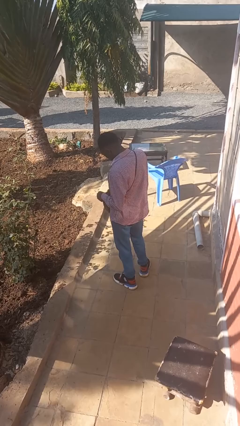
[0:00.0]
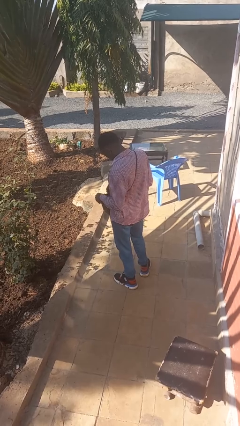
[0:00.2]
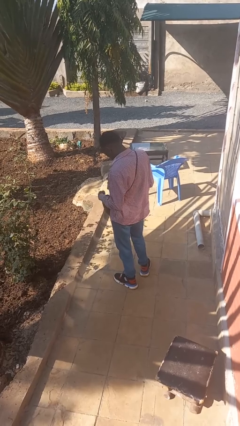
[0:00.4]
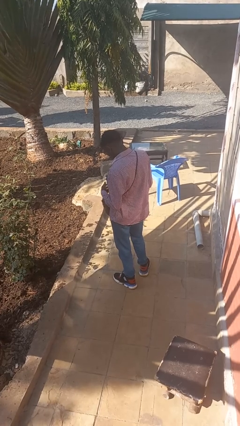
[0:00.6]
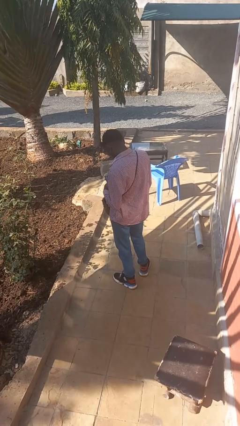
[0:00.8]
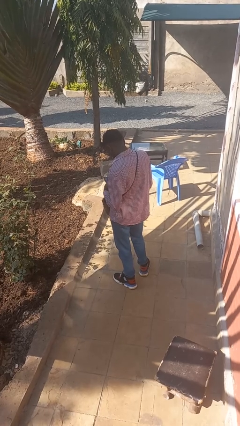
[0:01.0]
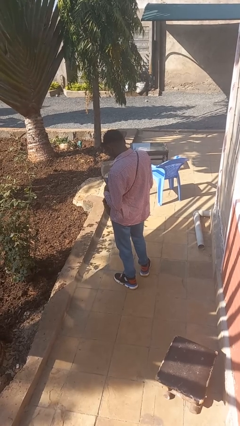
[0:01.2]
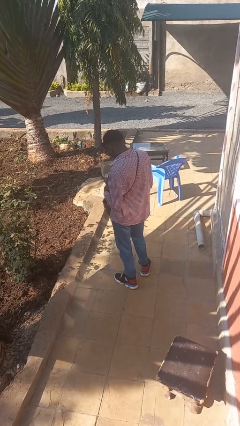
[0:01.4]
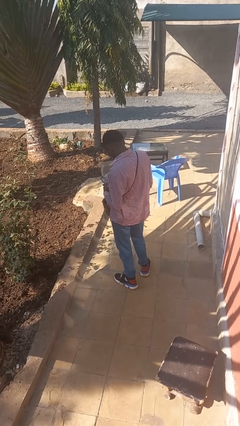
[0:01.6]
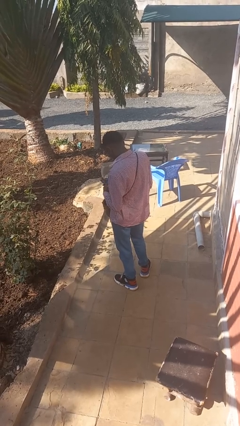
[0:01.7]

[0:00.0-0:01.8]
person takes object from purse

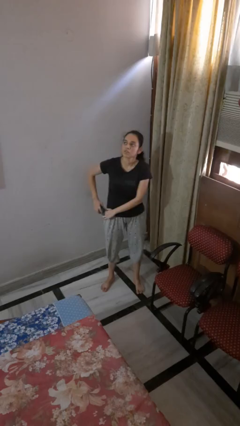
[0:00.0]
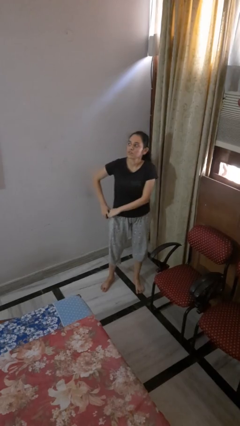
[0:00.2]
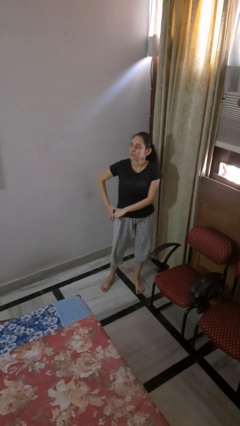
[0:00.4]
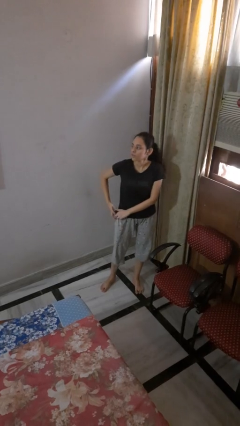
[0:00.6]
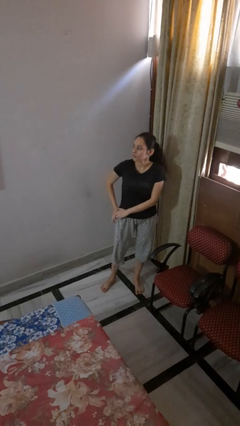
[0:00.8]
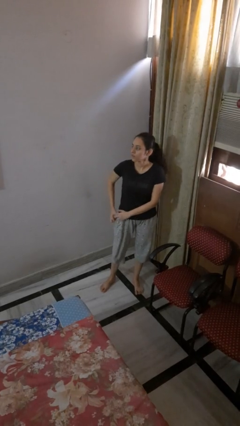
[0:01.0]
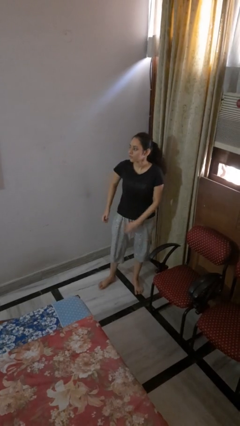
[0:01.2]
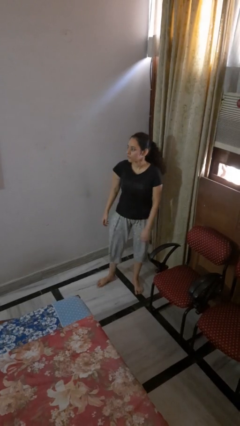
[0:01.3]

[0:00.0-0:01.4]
person puts phone into pocket

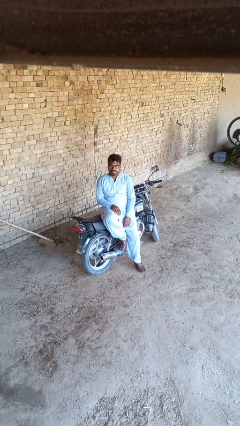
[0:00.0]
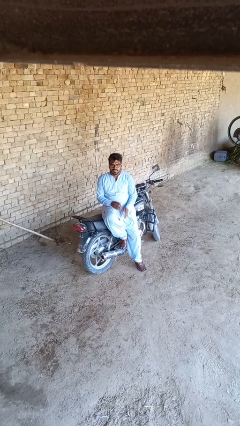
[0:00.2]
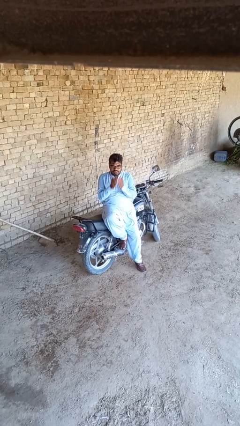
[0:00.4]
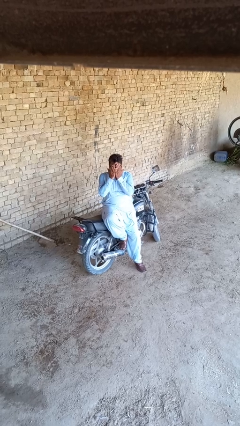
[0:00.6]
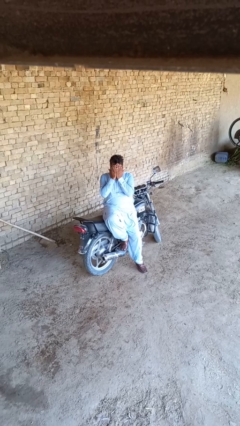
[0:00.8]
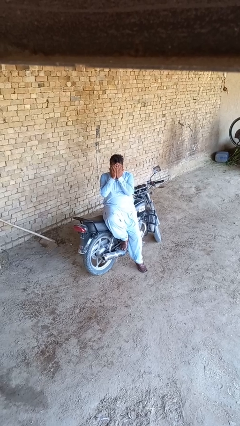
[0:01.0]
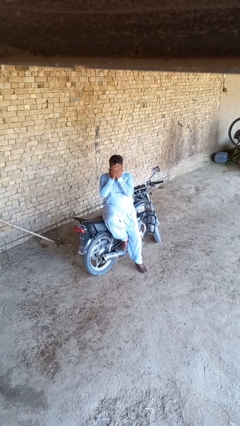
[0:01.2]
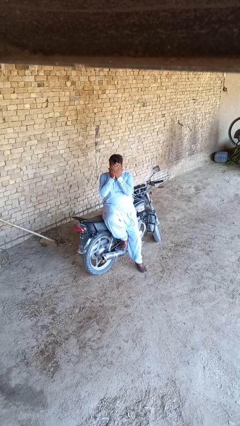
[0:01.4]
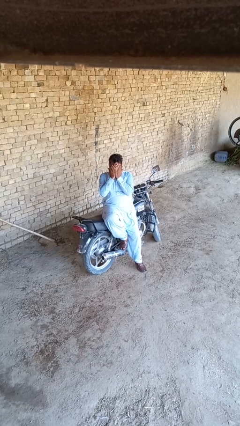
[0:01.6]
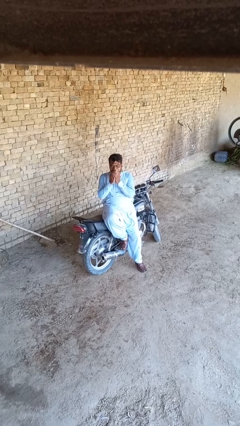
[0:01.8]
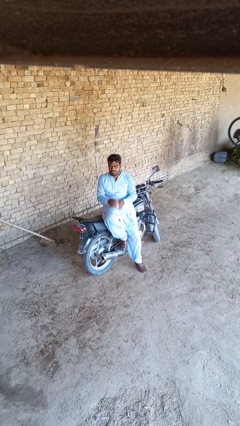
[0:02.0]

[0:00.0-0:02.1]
person covers face with hands

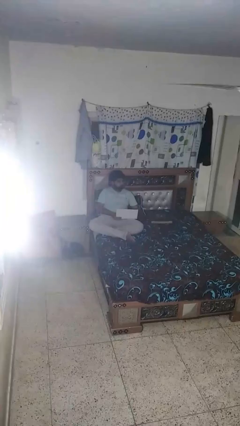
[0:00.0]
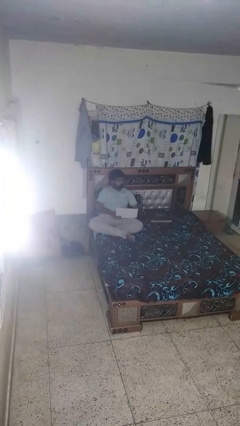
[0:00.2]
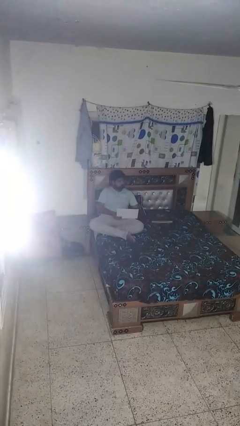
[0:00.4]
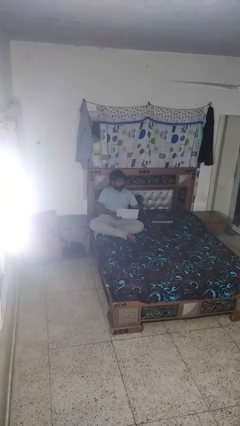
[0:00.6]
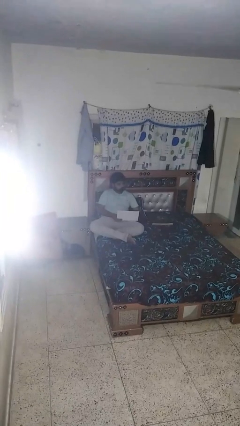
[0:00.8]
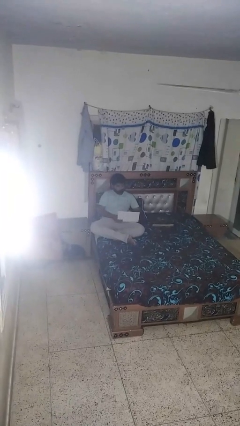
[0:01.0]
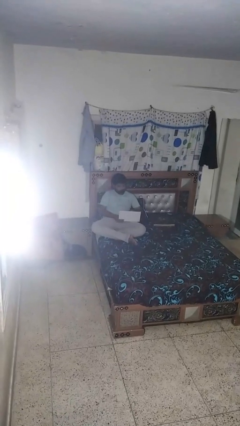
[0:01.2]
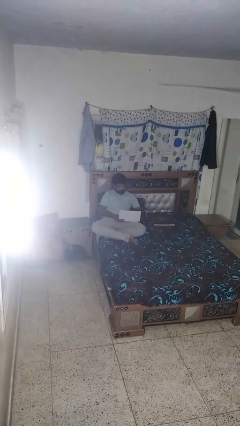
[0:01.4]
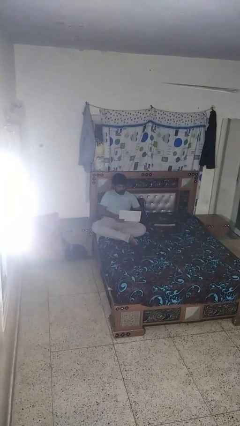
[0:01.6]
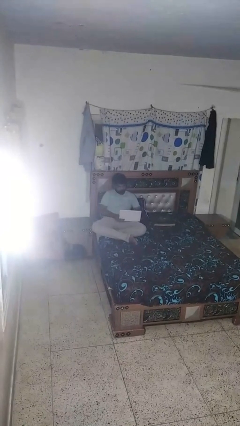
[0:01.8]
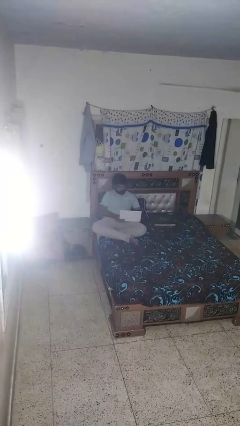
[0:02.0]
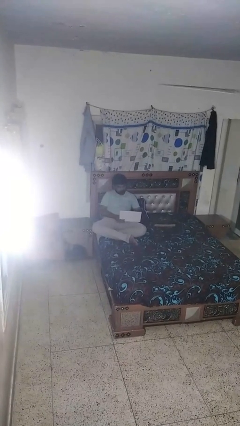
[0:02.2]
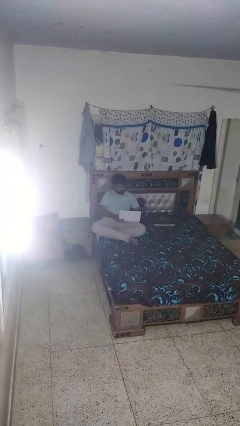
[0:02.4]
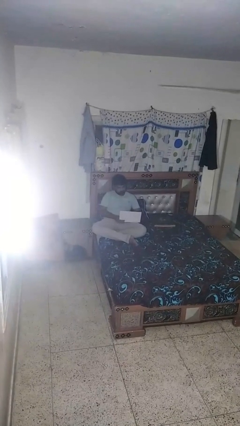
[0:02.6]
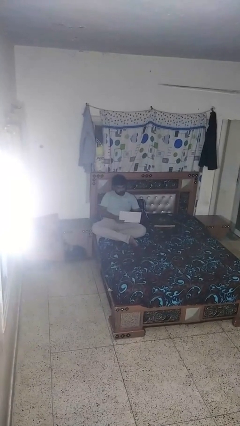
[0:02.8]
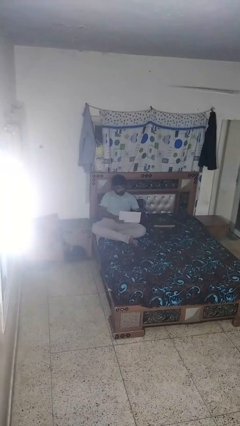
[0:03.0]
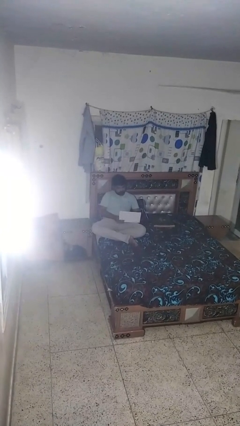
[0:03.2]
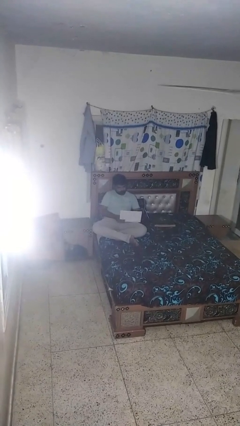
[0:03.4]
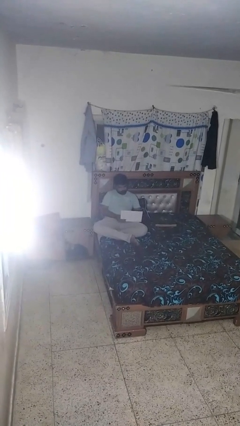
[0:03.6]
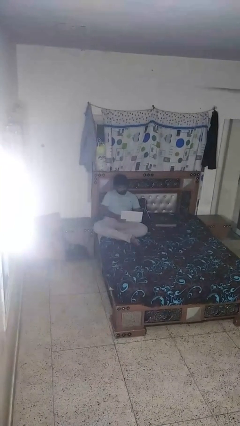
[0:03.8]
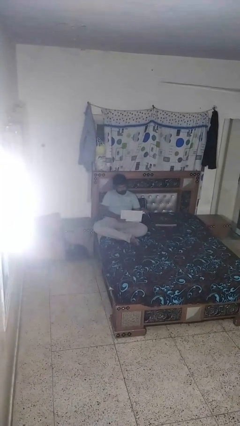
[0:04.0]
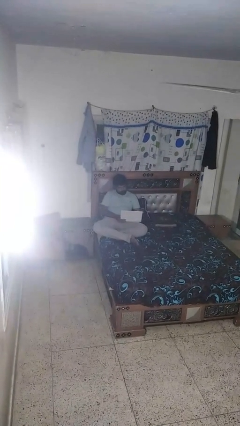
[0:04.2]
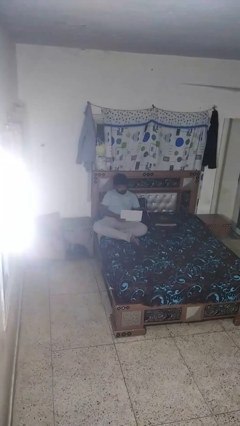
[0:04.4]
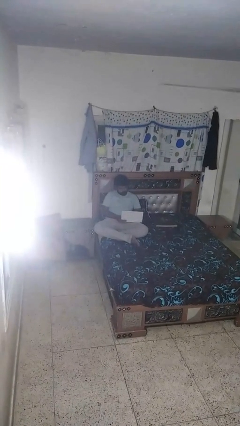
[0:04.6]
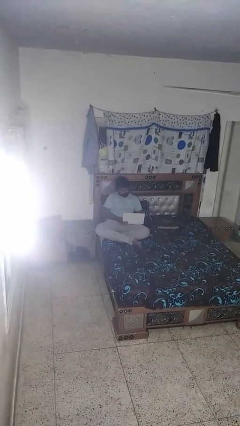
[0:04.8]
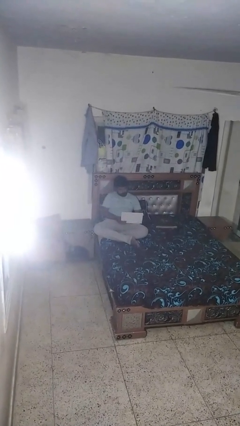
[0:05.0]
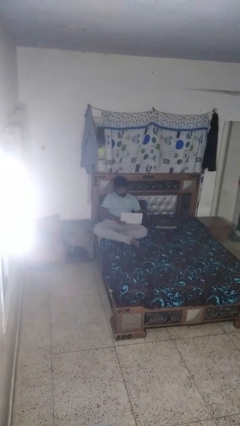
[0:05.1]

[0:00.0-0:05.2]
person interacts with tablet

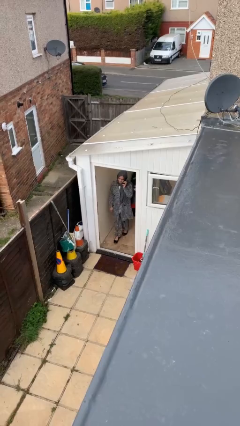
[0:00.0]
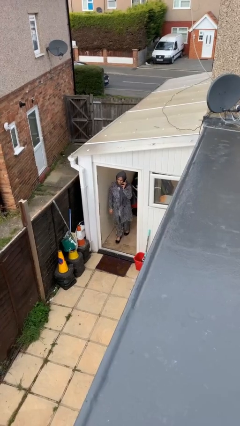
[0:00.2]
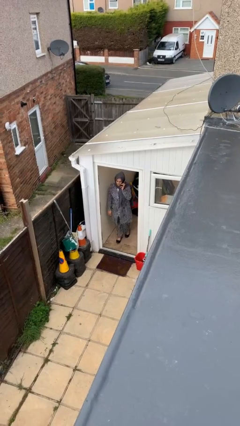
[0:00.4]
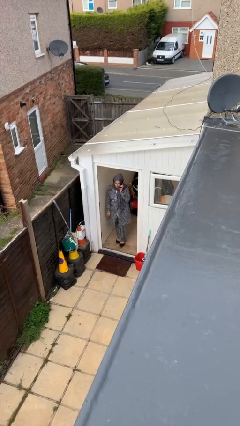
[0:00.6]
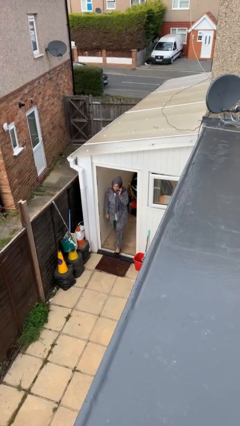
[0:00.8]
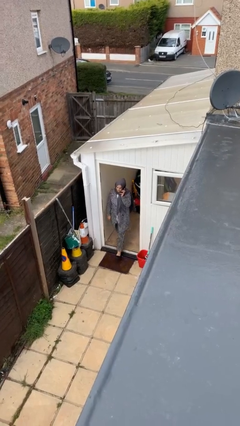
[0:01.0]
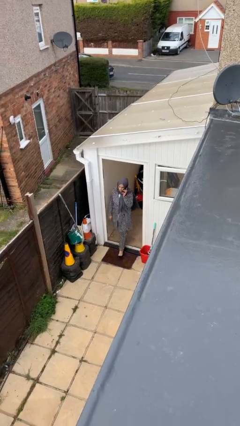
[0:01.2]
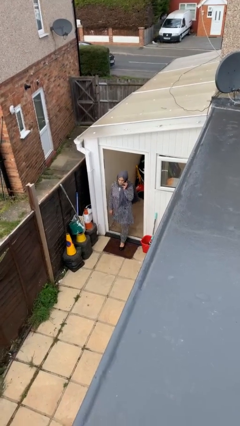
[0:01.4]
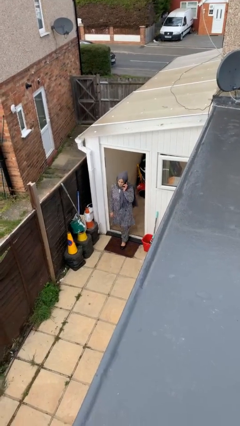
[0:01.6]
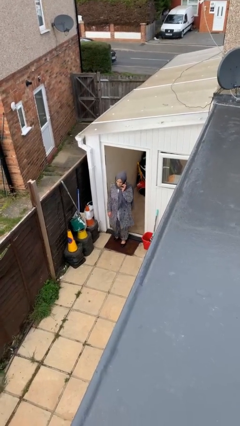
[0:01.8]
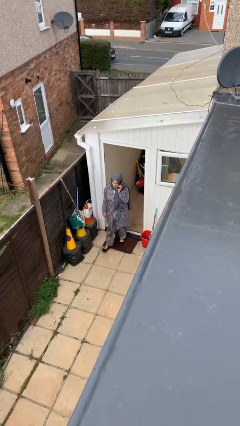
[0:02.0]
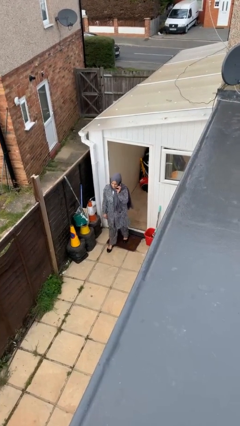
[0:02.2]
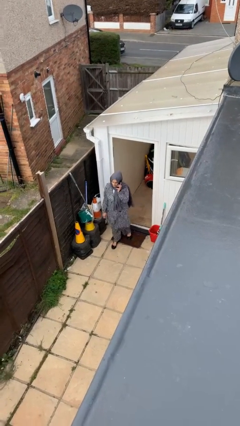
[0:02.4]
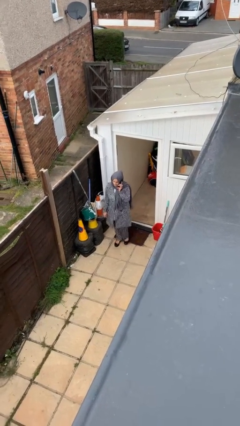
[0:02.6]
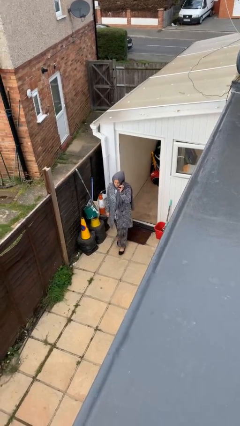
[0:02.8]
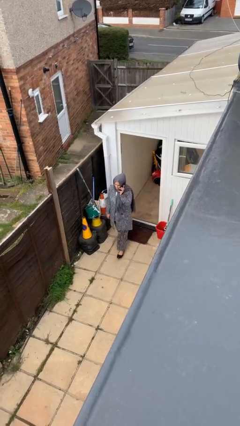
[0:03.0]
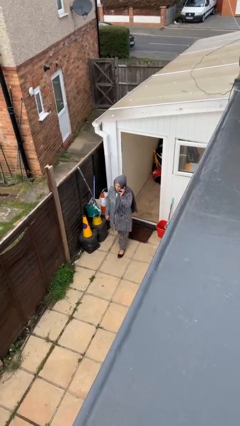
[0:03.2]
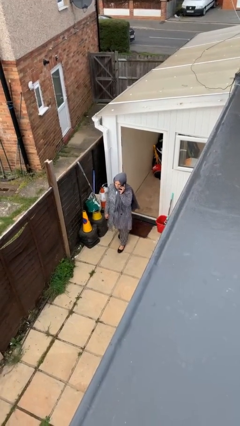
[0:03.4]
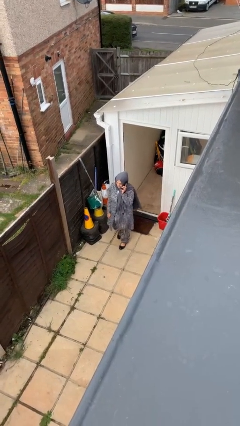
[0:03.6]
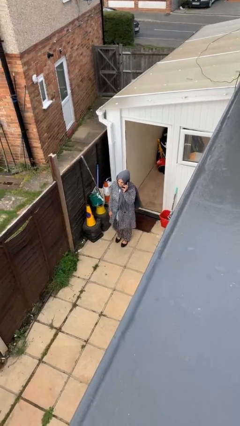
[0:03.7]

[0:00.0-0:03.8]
person enters scene through structure

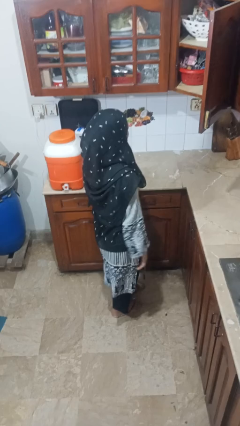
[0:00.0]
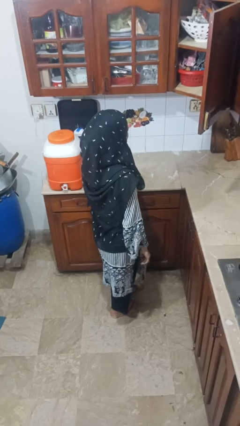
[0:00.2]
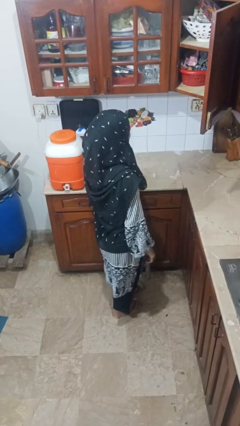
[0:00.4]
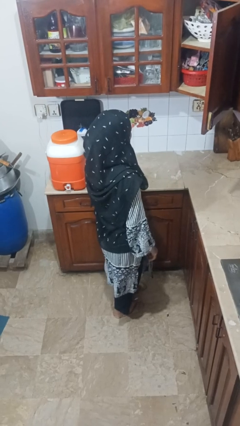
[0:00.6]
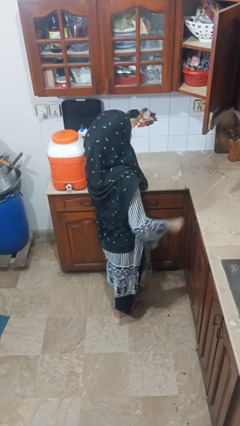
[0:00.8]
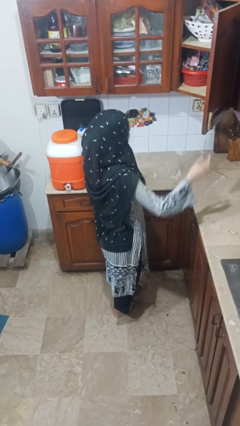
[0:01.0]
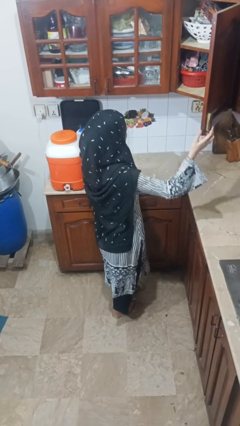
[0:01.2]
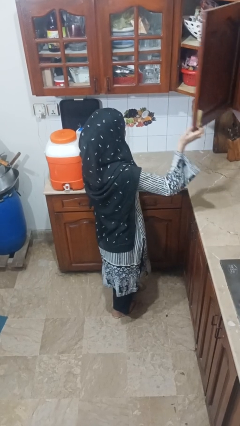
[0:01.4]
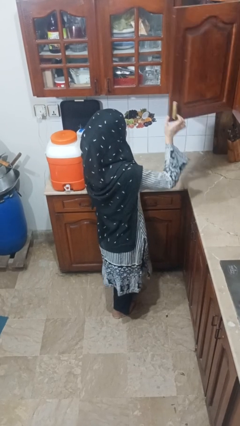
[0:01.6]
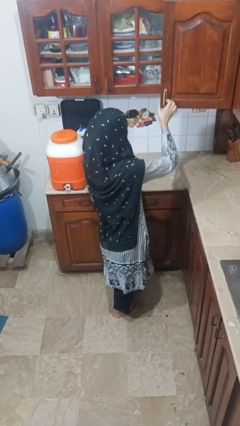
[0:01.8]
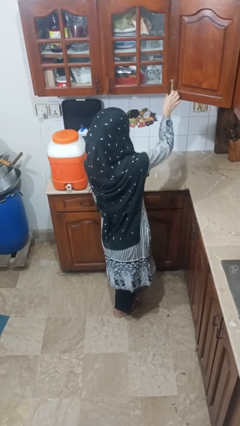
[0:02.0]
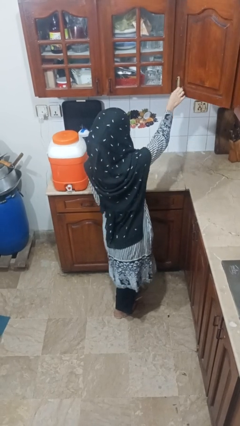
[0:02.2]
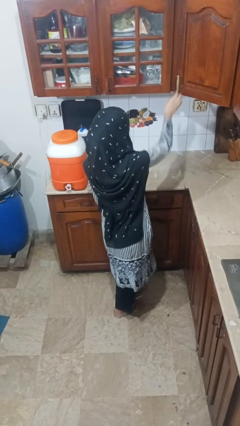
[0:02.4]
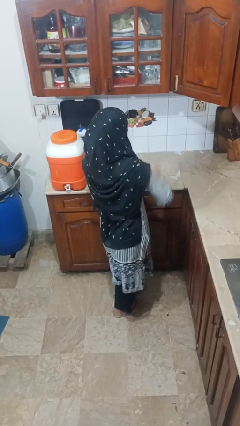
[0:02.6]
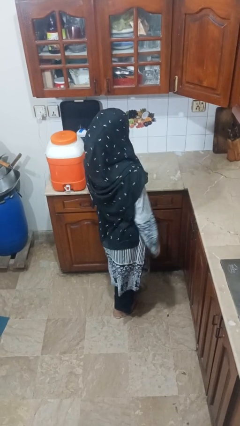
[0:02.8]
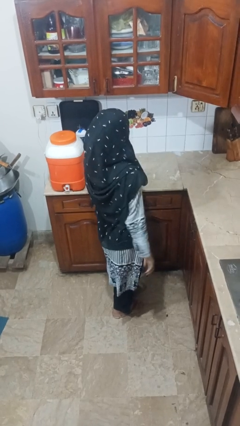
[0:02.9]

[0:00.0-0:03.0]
person closes cabinet
